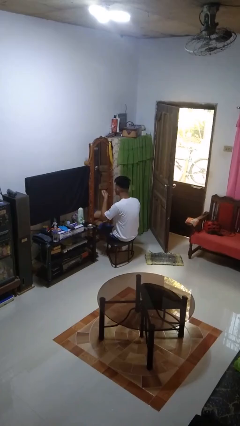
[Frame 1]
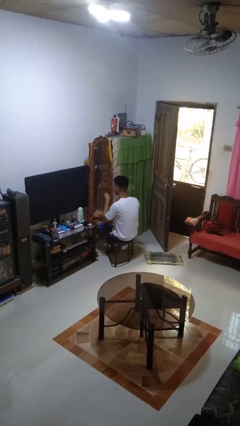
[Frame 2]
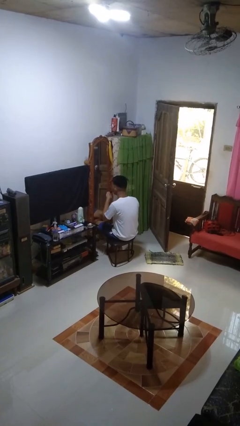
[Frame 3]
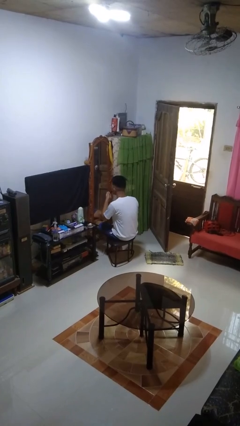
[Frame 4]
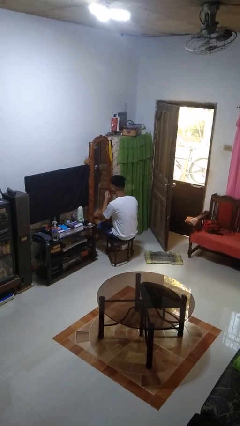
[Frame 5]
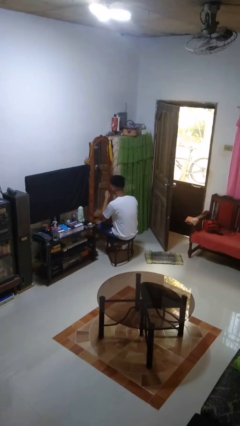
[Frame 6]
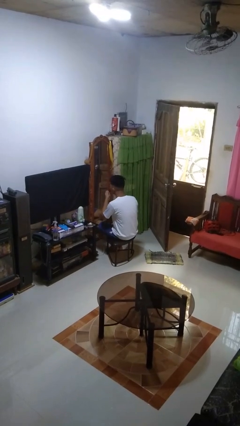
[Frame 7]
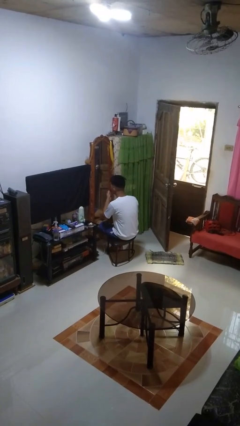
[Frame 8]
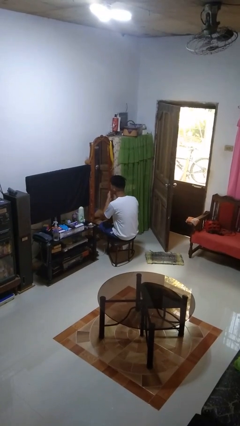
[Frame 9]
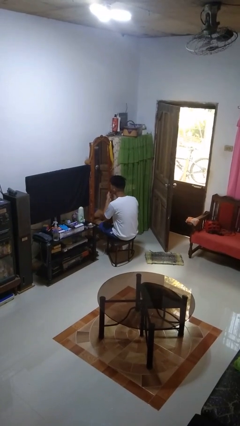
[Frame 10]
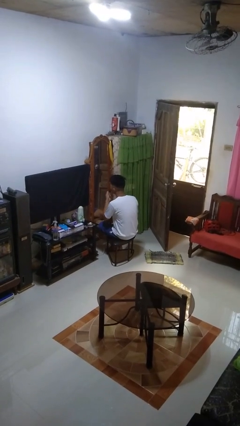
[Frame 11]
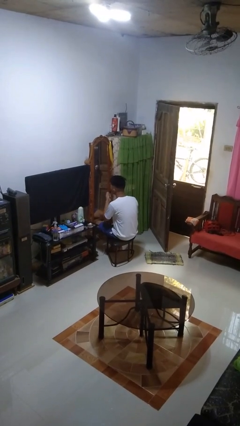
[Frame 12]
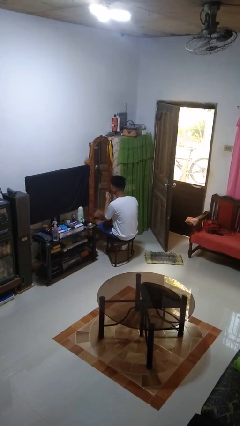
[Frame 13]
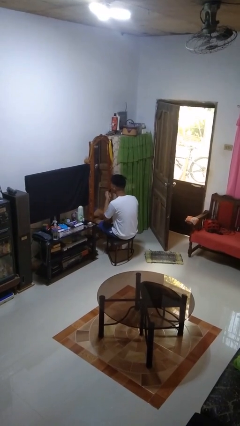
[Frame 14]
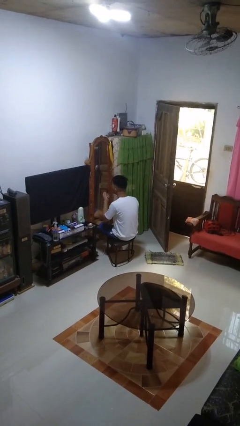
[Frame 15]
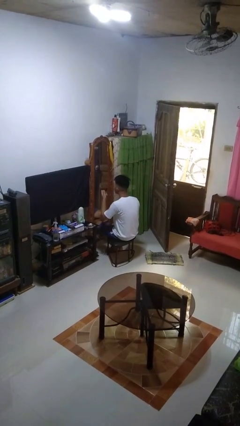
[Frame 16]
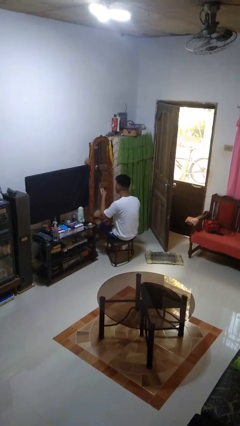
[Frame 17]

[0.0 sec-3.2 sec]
person applies lip makeup

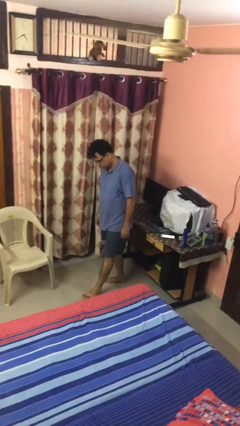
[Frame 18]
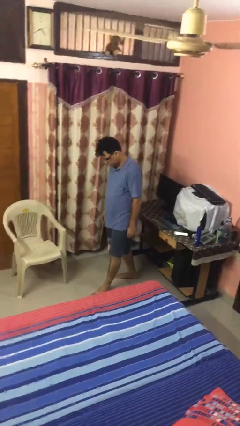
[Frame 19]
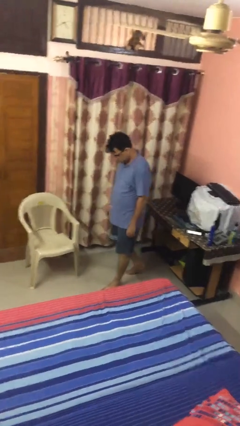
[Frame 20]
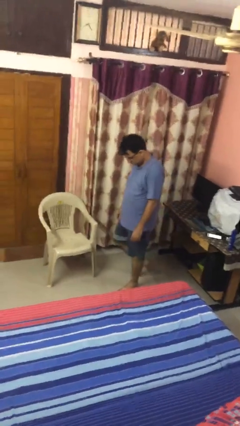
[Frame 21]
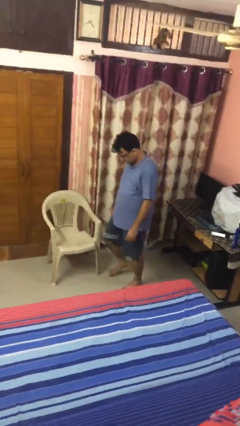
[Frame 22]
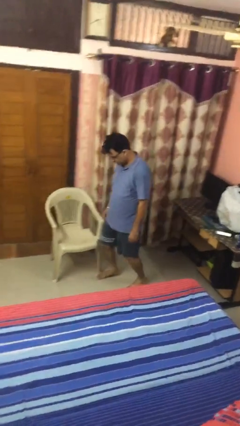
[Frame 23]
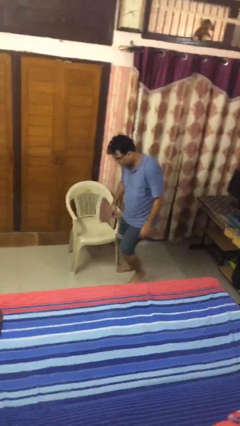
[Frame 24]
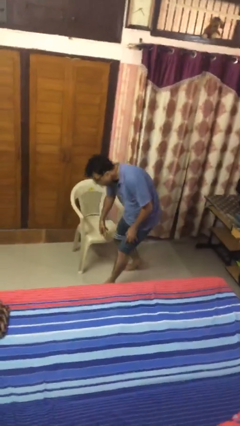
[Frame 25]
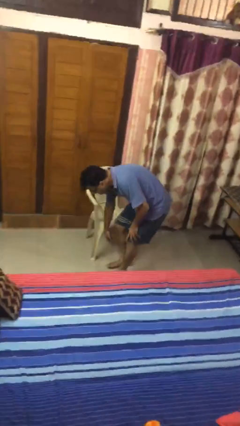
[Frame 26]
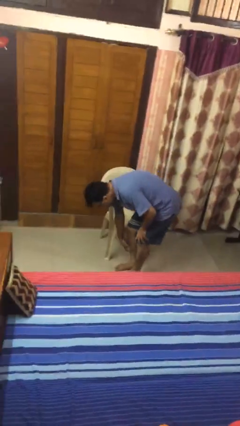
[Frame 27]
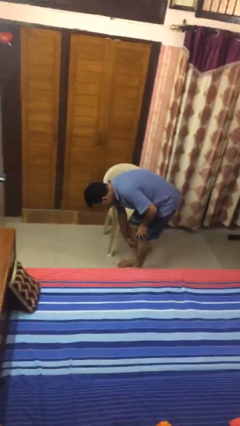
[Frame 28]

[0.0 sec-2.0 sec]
person stubs toe

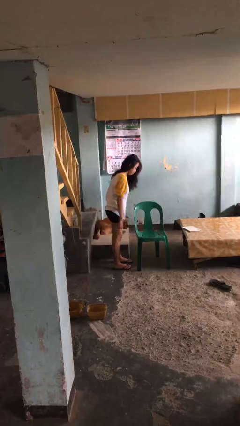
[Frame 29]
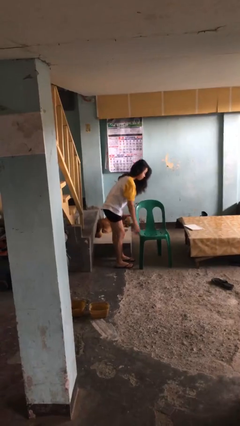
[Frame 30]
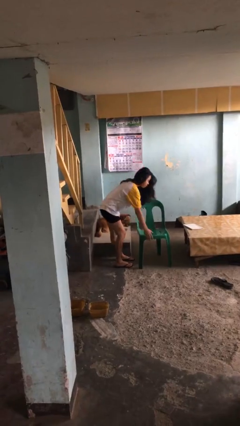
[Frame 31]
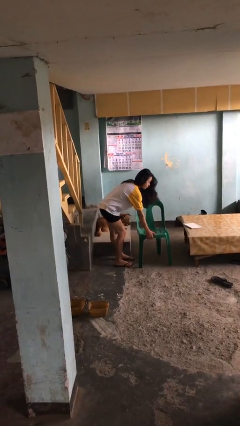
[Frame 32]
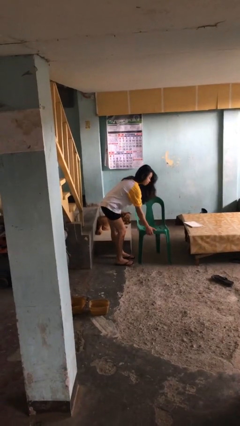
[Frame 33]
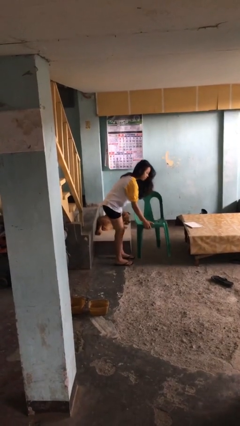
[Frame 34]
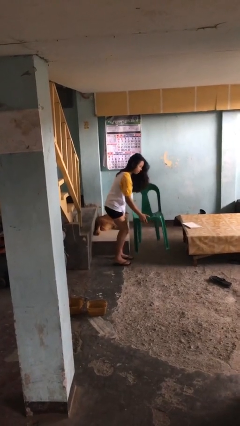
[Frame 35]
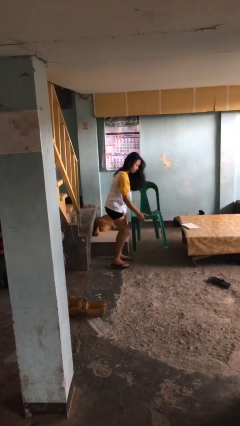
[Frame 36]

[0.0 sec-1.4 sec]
person picks up object from floor

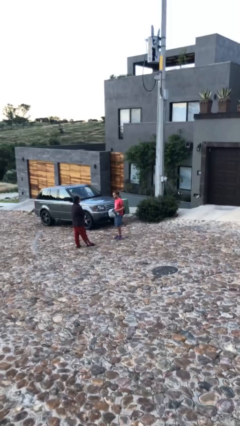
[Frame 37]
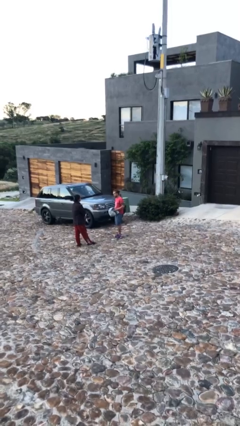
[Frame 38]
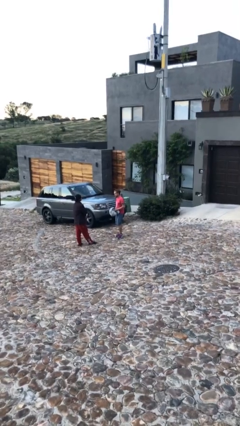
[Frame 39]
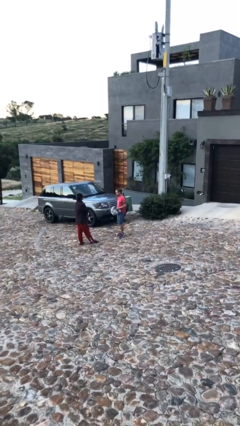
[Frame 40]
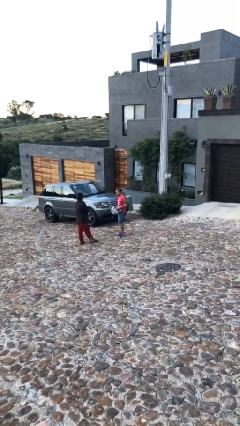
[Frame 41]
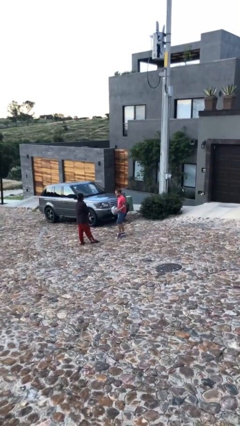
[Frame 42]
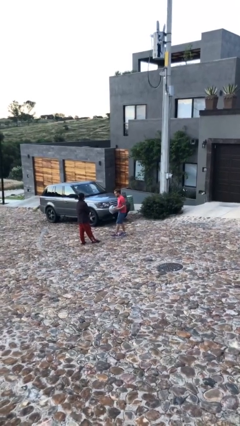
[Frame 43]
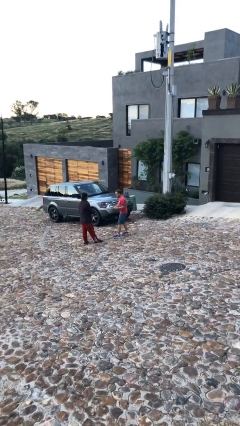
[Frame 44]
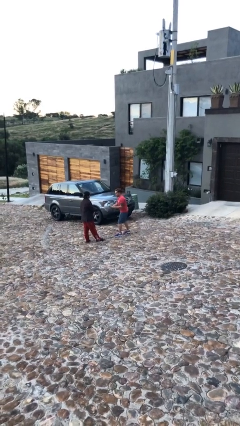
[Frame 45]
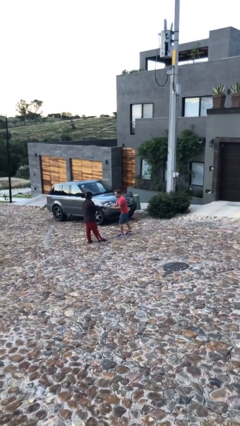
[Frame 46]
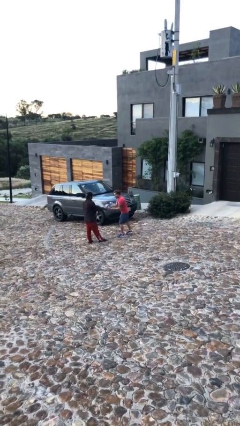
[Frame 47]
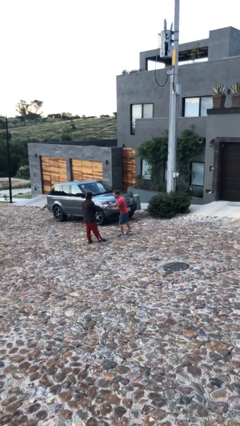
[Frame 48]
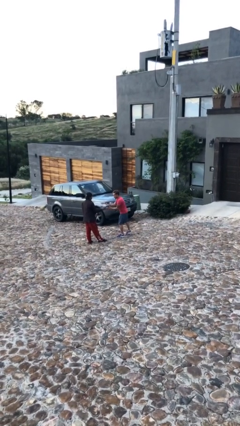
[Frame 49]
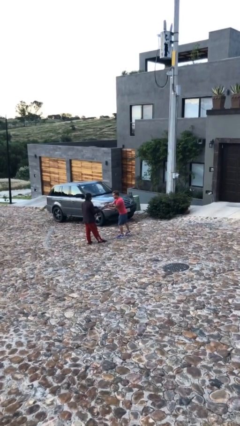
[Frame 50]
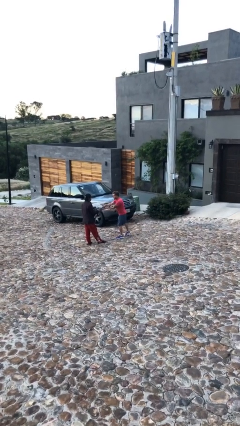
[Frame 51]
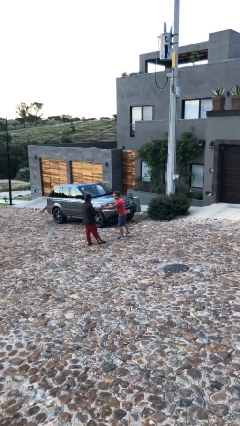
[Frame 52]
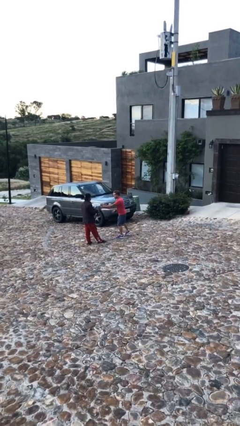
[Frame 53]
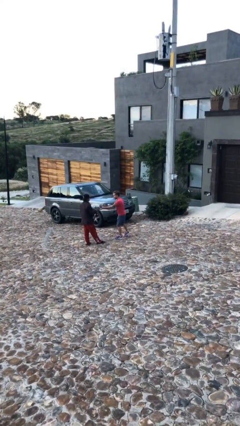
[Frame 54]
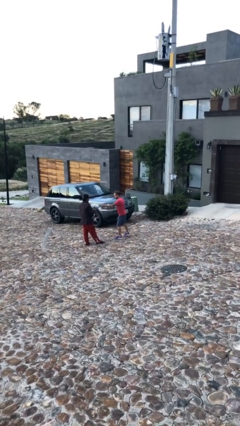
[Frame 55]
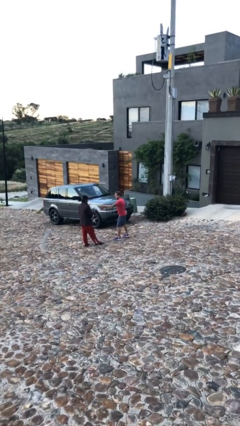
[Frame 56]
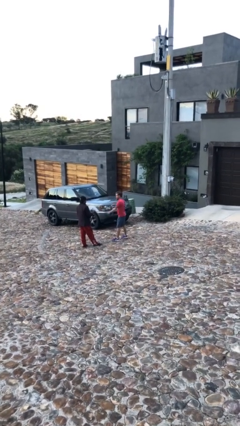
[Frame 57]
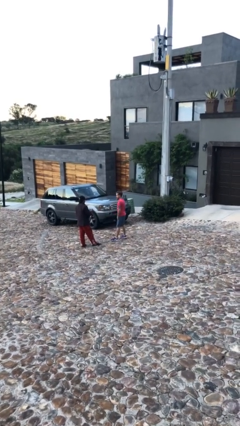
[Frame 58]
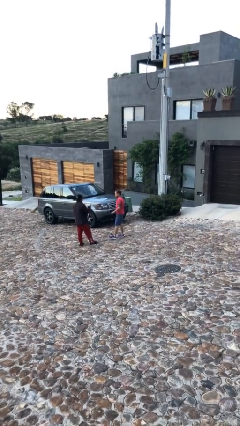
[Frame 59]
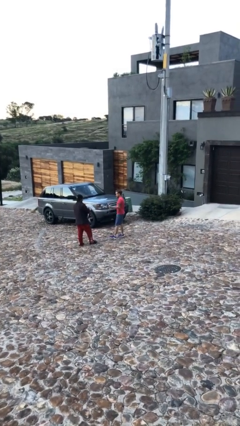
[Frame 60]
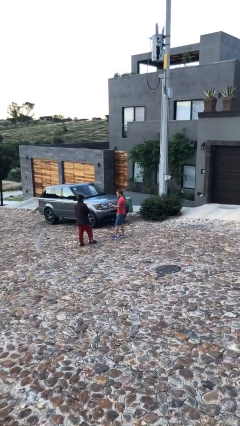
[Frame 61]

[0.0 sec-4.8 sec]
person transfers object to person

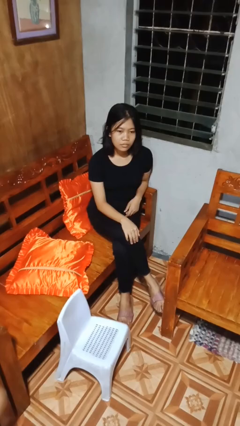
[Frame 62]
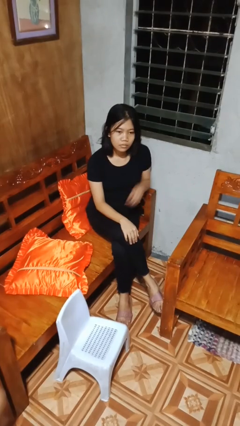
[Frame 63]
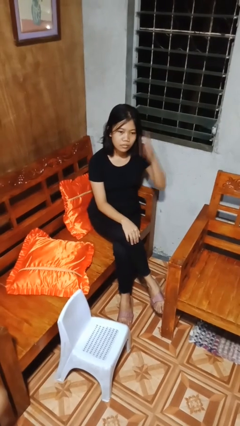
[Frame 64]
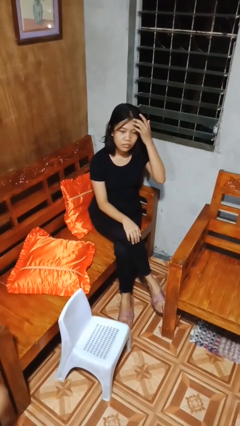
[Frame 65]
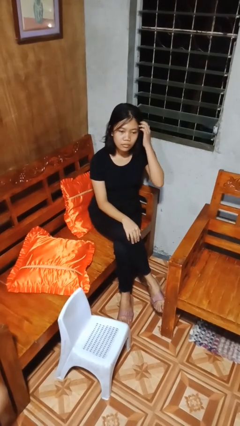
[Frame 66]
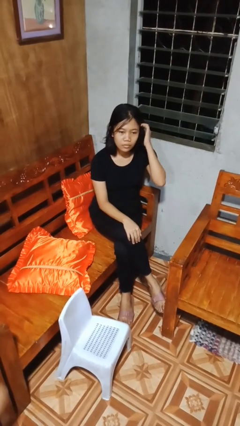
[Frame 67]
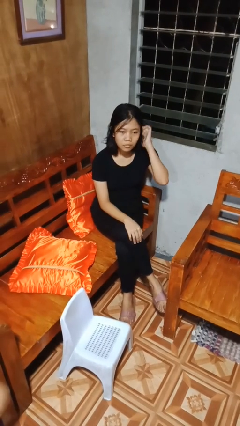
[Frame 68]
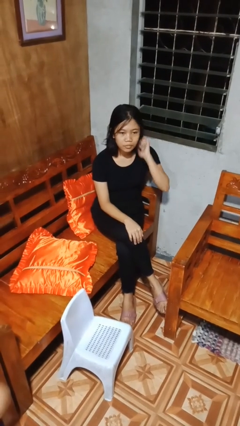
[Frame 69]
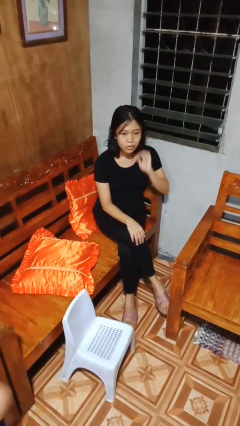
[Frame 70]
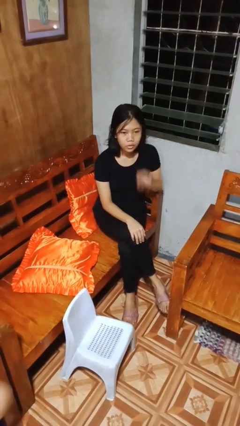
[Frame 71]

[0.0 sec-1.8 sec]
person strokes hair

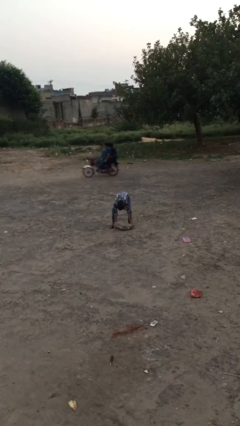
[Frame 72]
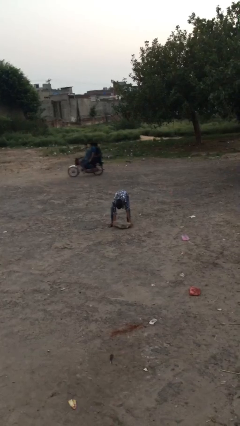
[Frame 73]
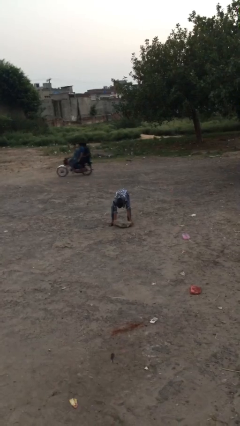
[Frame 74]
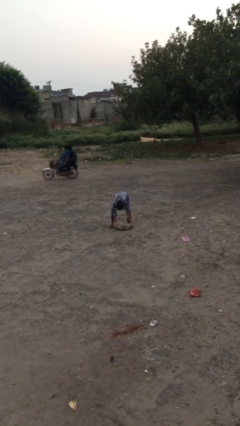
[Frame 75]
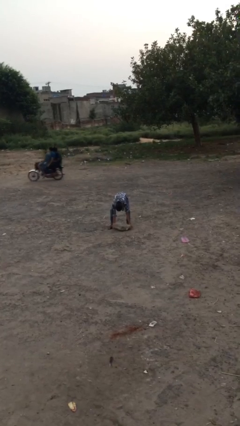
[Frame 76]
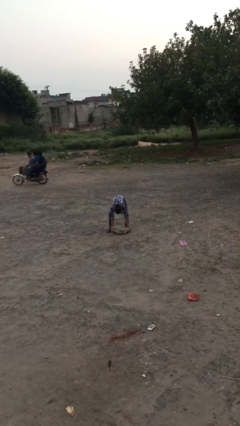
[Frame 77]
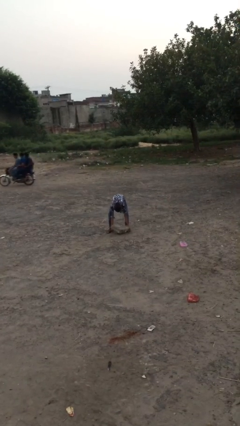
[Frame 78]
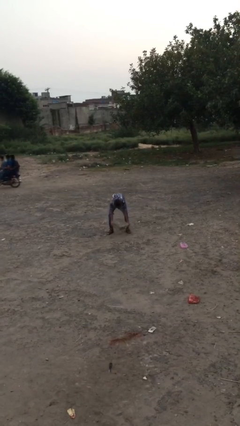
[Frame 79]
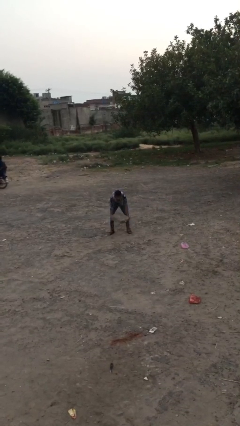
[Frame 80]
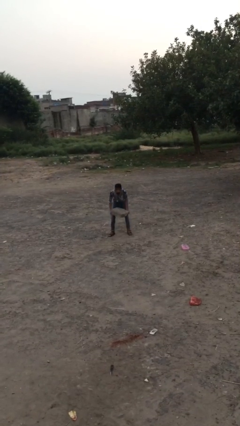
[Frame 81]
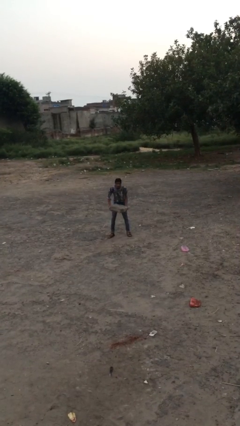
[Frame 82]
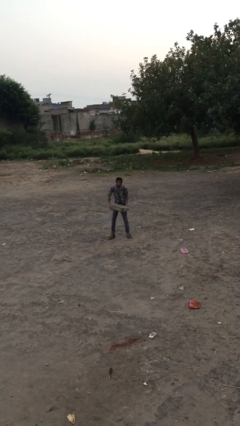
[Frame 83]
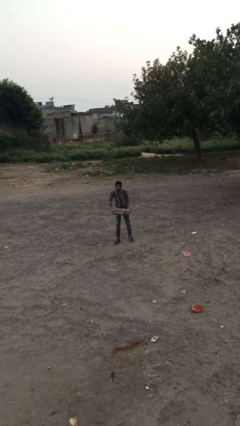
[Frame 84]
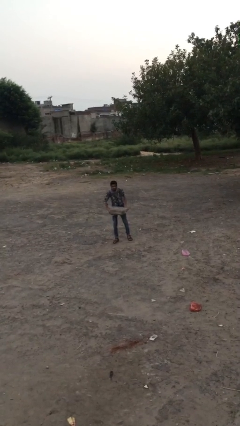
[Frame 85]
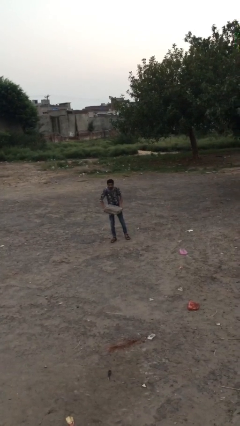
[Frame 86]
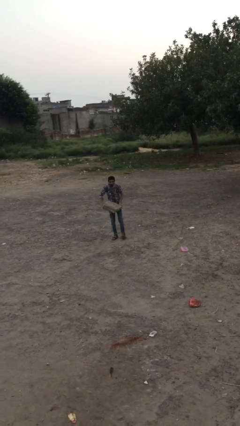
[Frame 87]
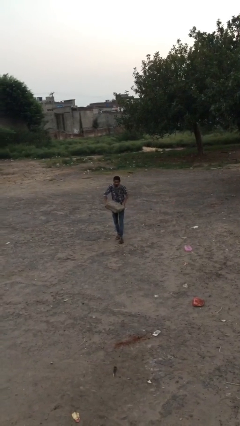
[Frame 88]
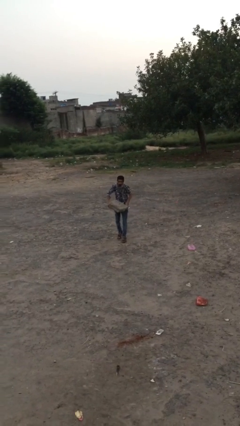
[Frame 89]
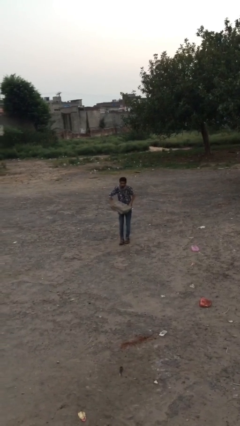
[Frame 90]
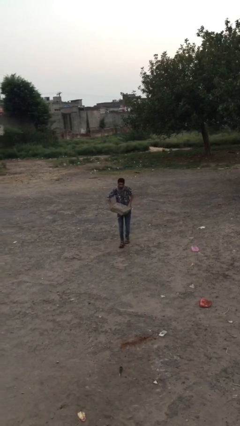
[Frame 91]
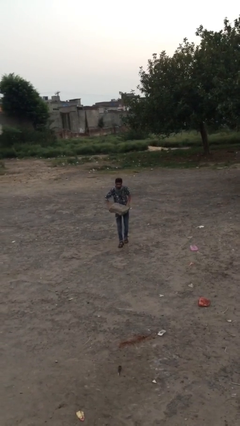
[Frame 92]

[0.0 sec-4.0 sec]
person carries heavy object
